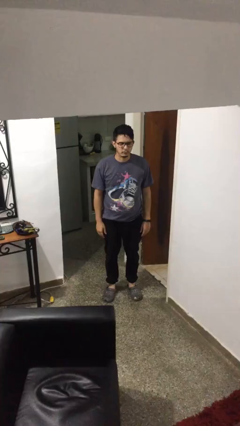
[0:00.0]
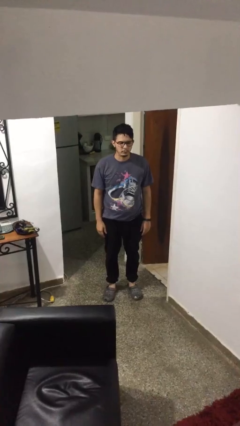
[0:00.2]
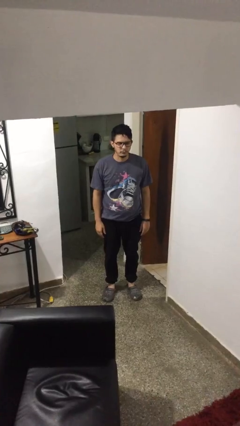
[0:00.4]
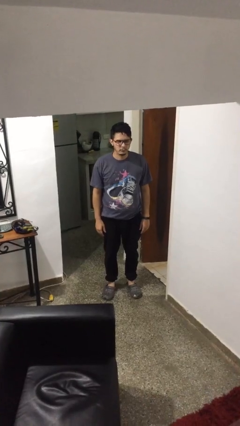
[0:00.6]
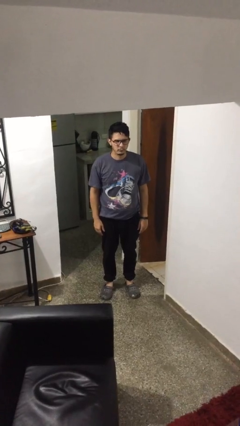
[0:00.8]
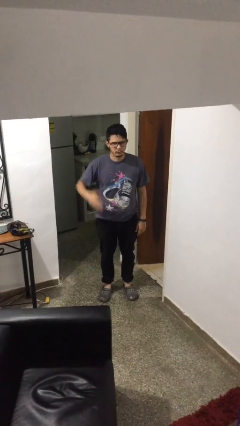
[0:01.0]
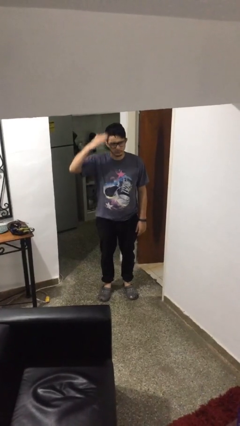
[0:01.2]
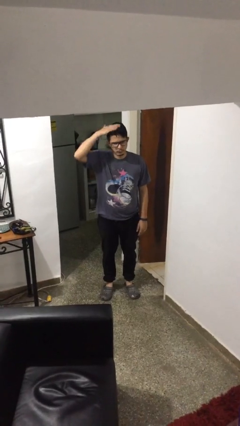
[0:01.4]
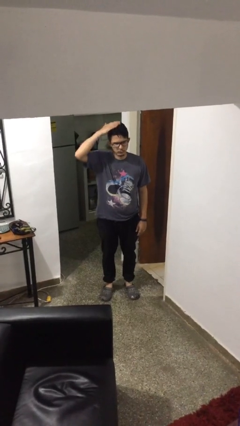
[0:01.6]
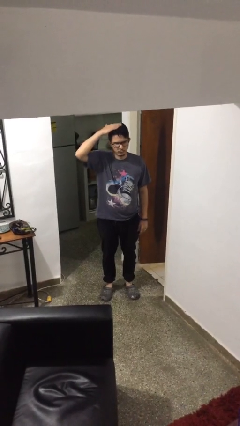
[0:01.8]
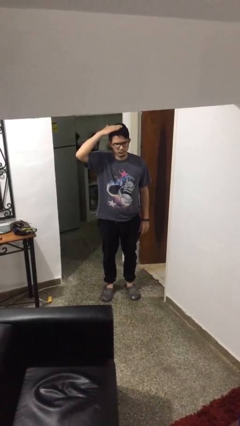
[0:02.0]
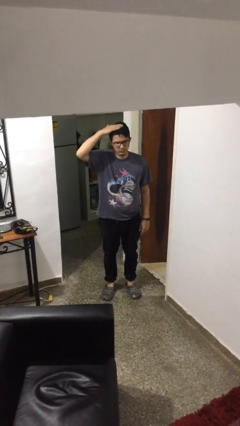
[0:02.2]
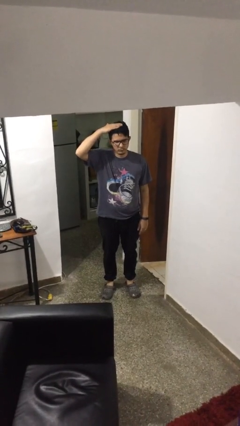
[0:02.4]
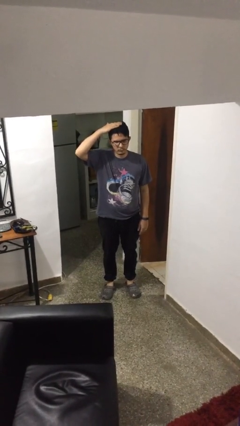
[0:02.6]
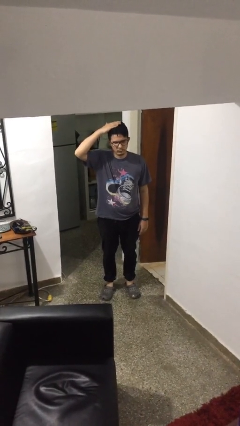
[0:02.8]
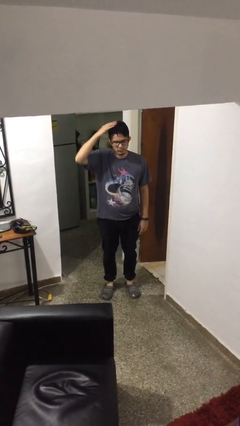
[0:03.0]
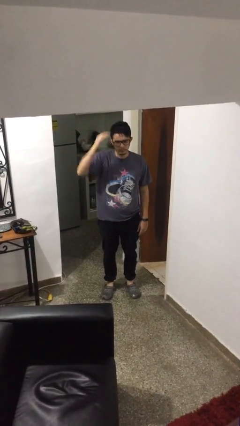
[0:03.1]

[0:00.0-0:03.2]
person pats head

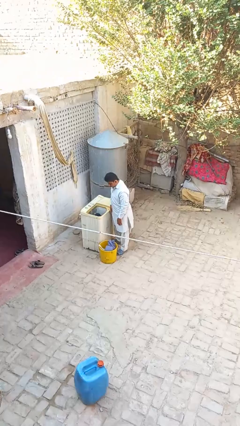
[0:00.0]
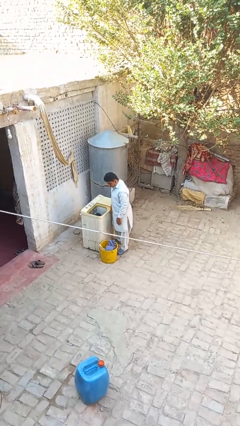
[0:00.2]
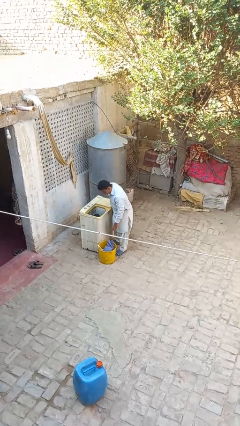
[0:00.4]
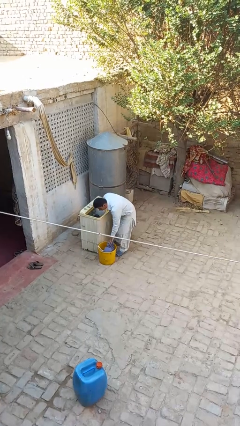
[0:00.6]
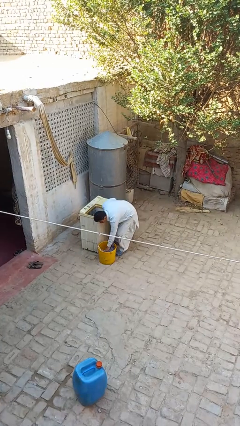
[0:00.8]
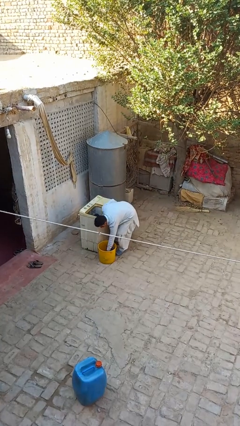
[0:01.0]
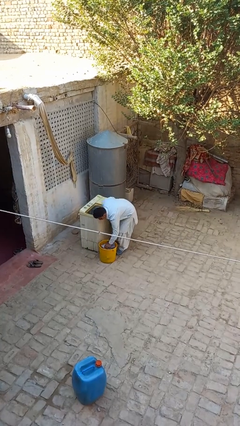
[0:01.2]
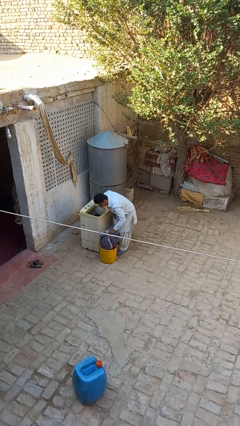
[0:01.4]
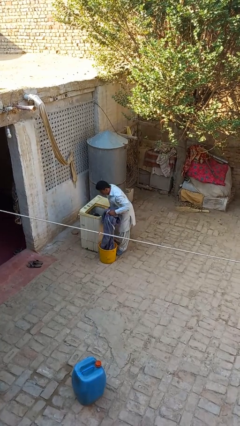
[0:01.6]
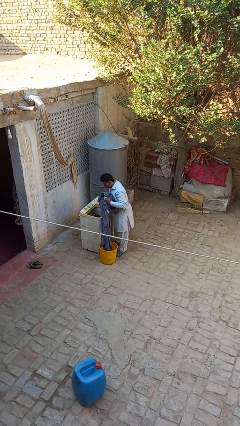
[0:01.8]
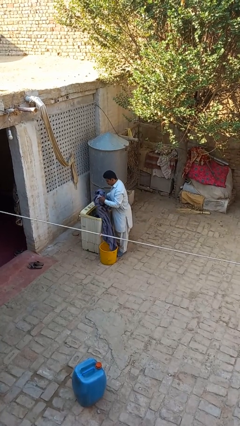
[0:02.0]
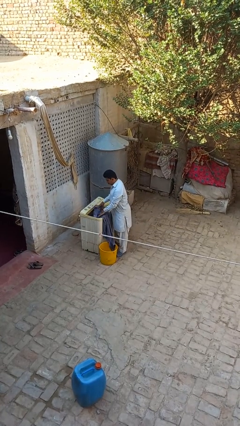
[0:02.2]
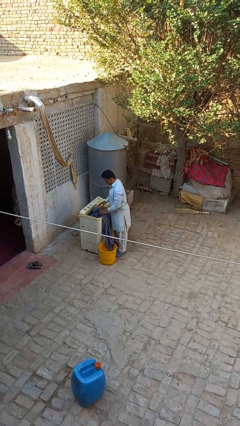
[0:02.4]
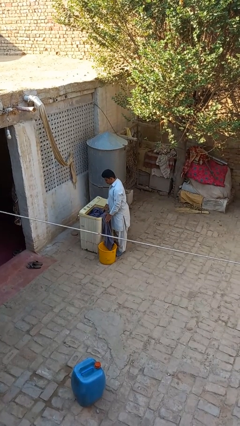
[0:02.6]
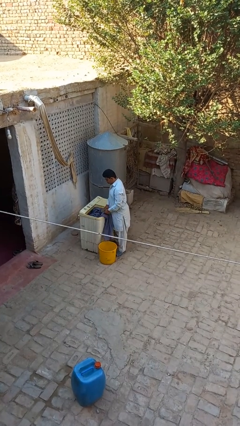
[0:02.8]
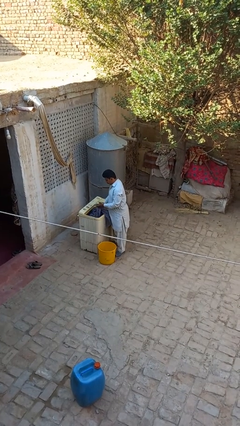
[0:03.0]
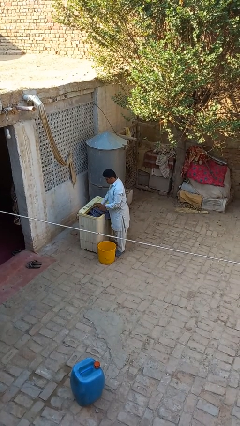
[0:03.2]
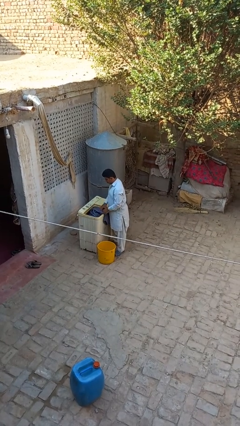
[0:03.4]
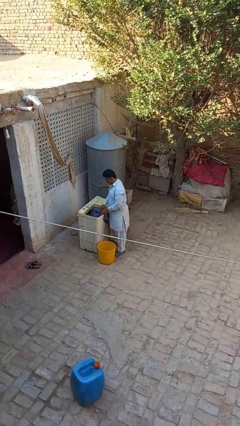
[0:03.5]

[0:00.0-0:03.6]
person loads clotheswasher

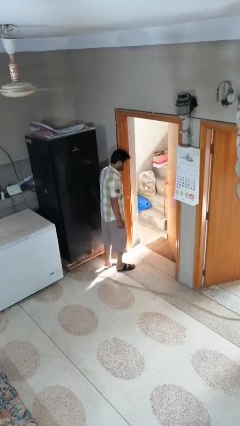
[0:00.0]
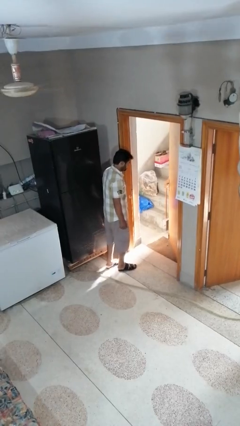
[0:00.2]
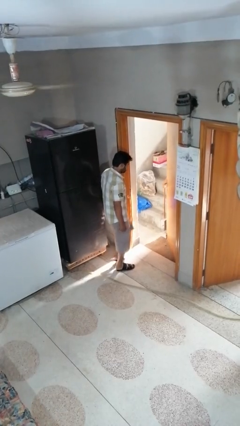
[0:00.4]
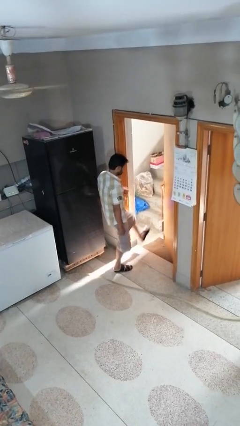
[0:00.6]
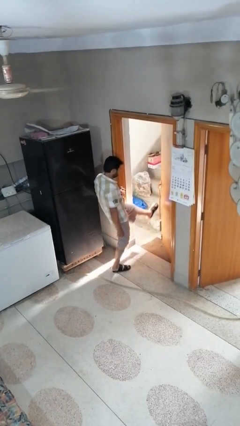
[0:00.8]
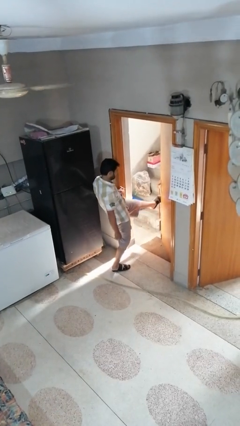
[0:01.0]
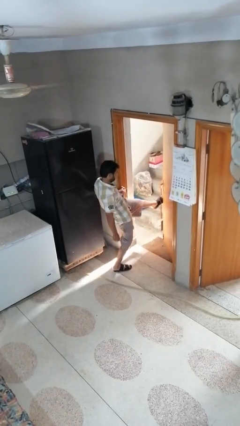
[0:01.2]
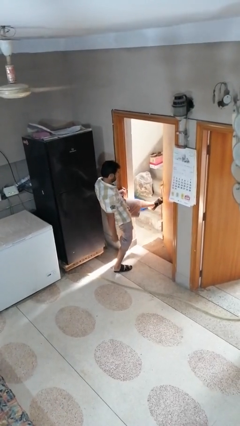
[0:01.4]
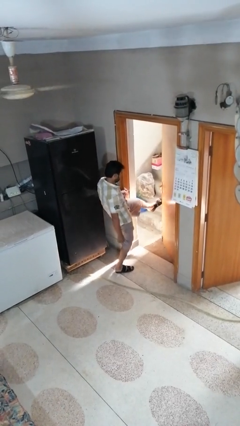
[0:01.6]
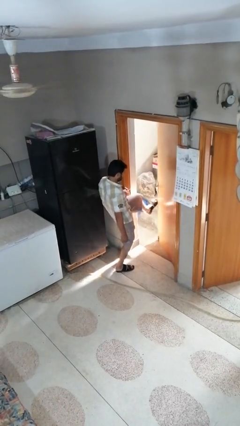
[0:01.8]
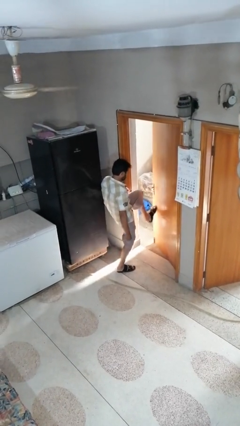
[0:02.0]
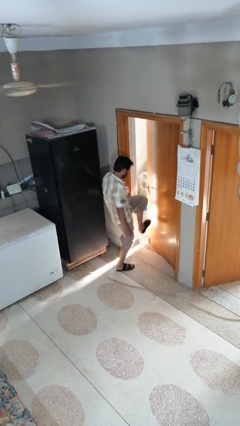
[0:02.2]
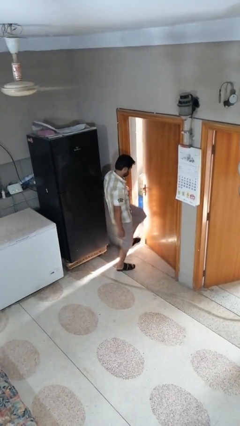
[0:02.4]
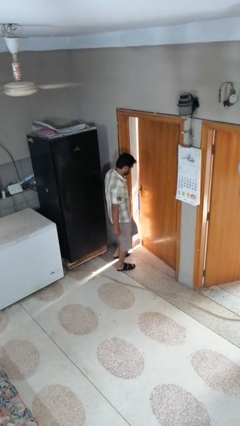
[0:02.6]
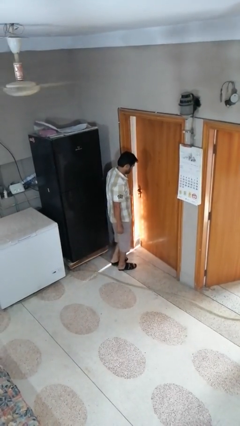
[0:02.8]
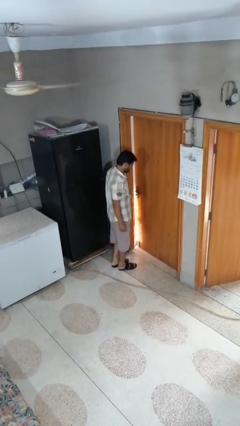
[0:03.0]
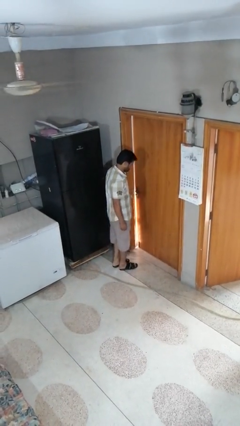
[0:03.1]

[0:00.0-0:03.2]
person closes door with foot

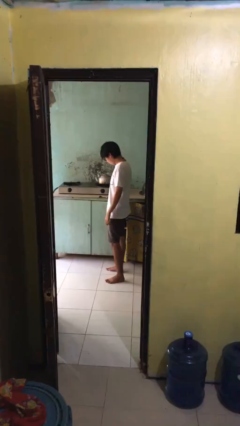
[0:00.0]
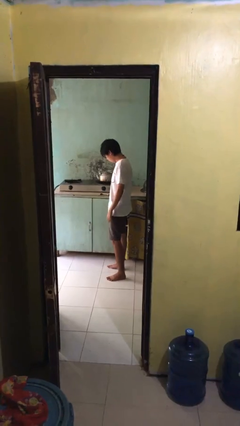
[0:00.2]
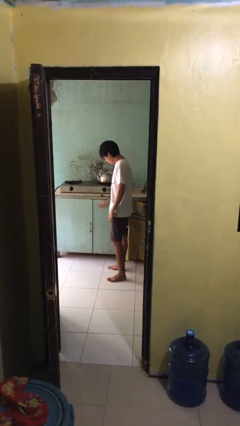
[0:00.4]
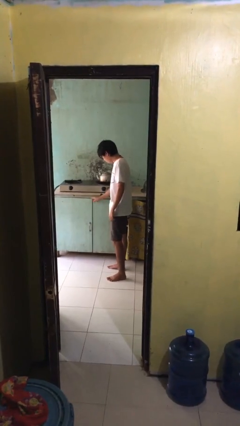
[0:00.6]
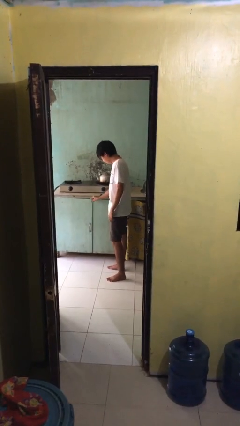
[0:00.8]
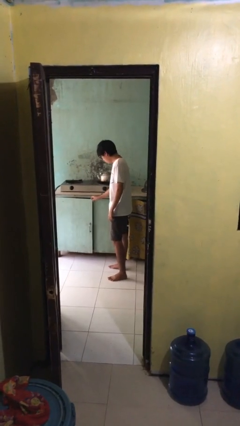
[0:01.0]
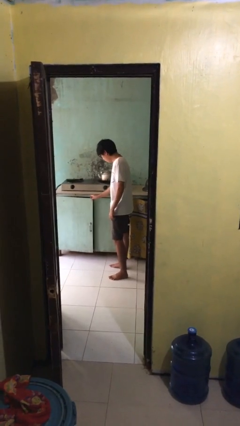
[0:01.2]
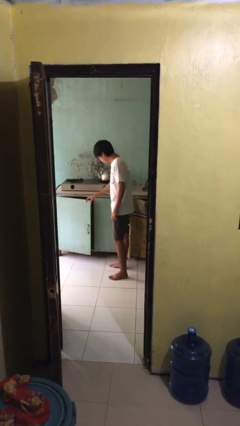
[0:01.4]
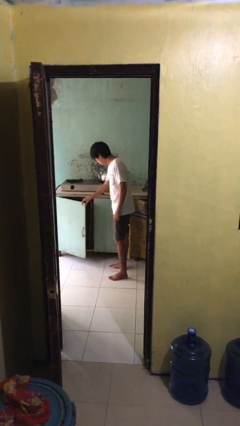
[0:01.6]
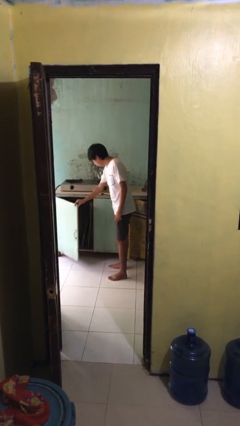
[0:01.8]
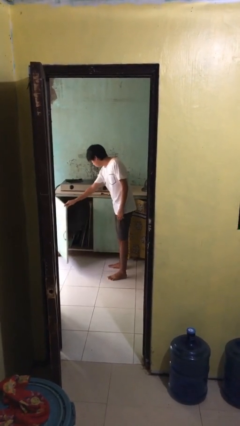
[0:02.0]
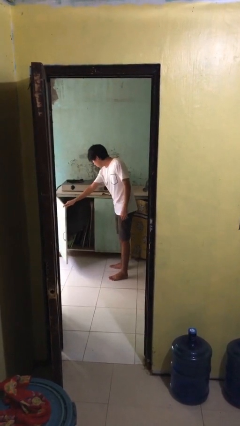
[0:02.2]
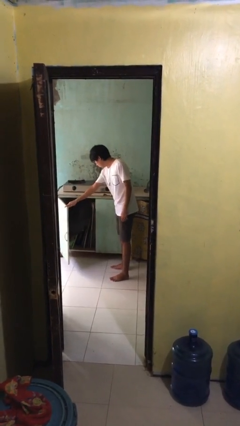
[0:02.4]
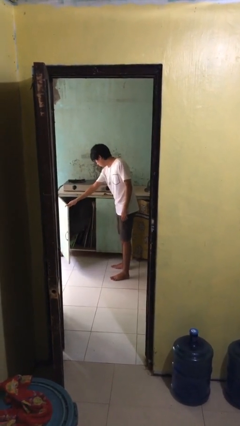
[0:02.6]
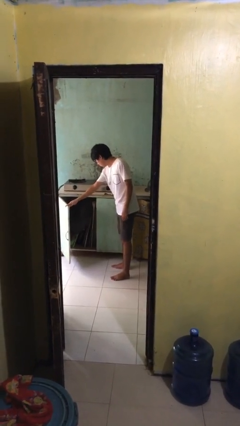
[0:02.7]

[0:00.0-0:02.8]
person opens cabinet

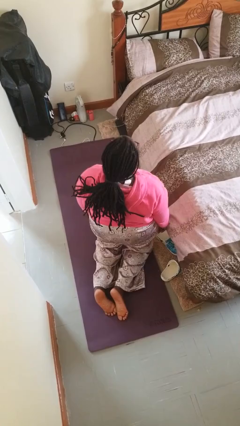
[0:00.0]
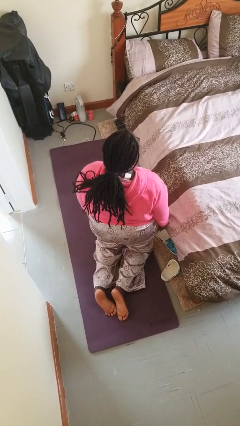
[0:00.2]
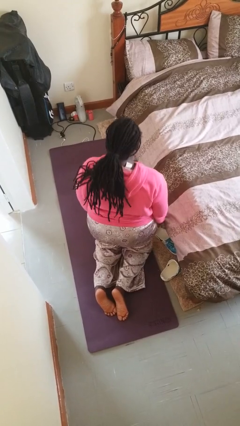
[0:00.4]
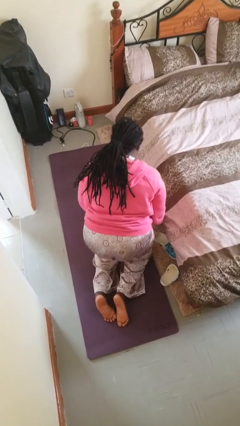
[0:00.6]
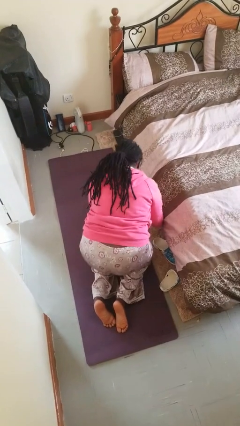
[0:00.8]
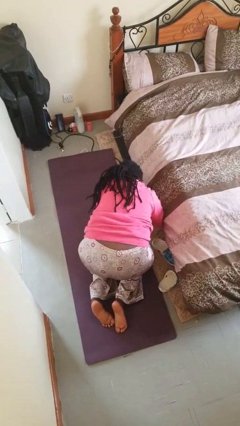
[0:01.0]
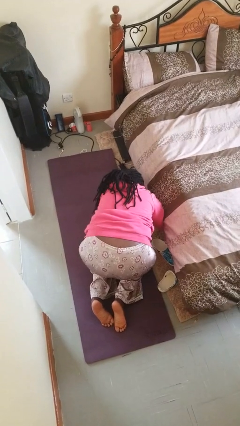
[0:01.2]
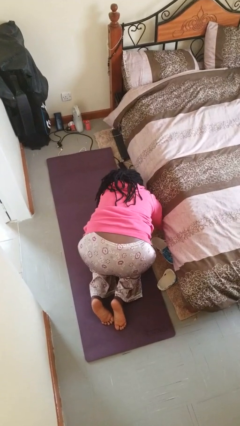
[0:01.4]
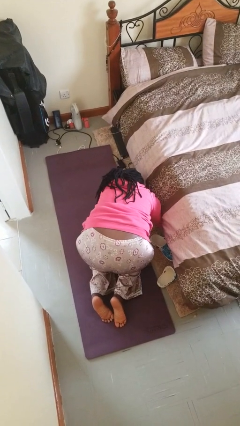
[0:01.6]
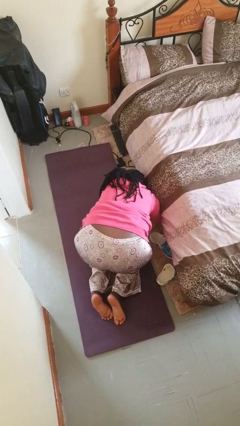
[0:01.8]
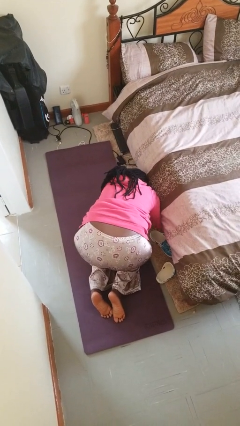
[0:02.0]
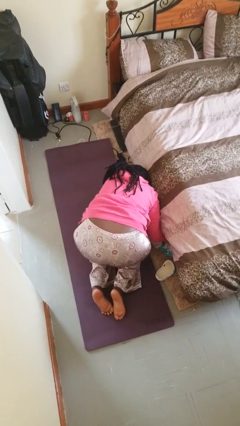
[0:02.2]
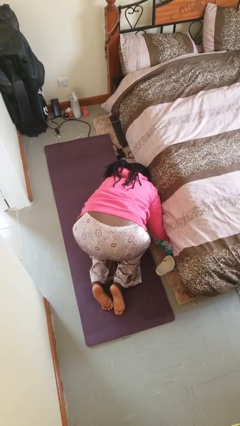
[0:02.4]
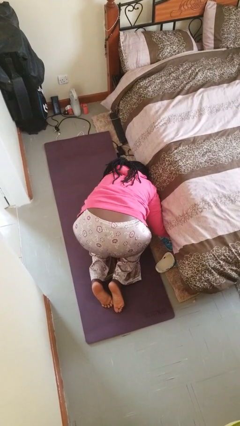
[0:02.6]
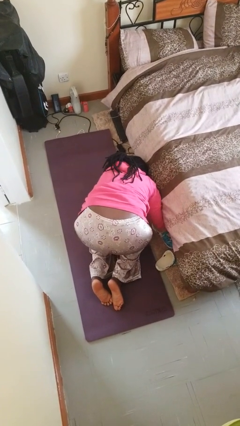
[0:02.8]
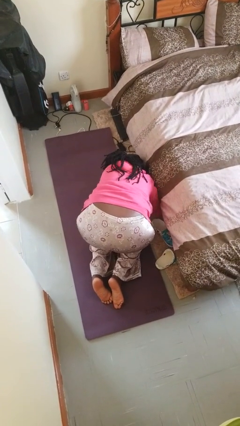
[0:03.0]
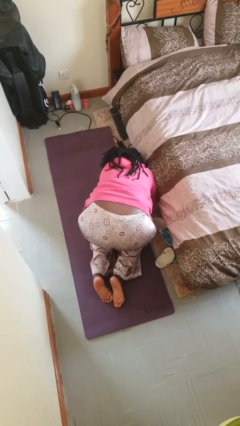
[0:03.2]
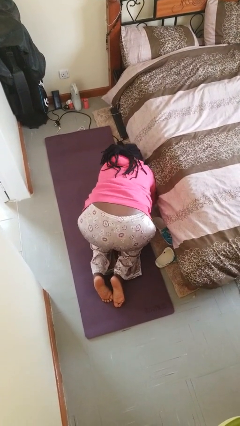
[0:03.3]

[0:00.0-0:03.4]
person searches under bed

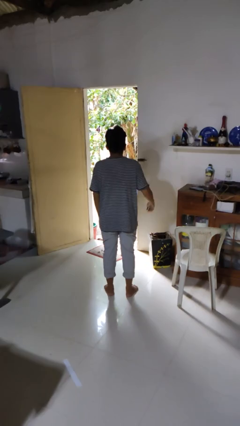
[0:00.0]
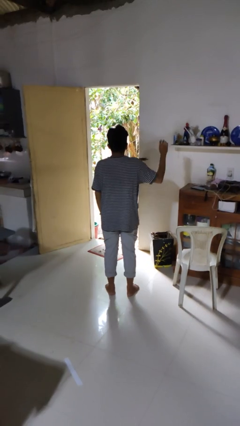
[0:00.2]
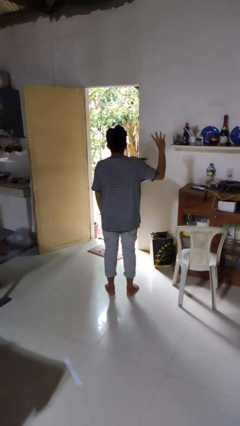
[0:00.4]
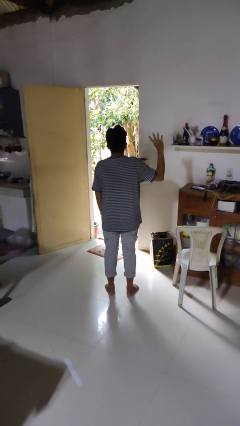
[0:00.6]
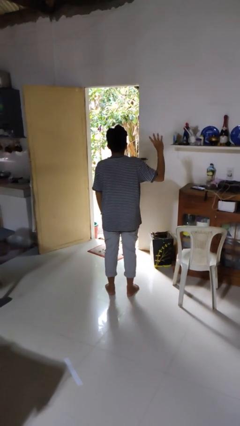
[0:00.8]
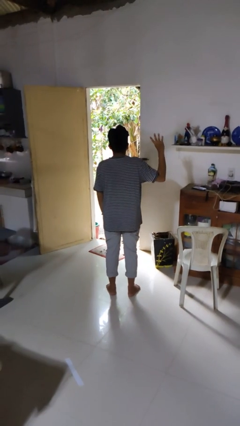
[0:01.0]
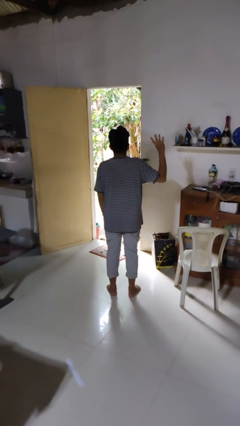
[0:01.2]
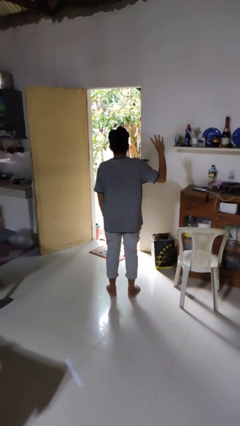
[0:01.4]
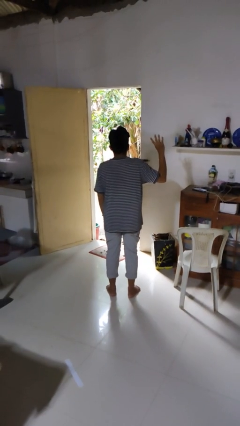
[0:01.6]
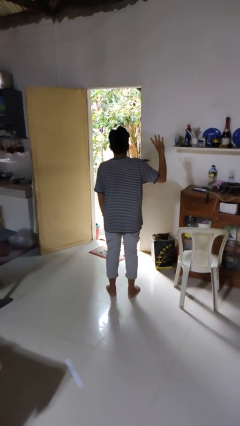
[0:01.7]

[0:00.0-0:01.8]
person gestures number four
